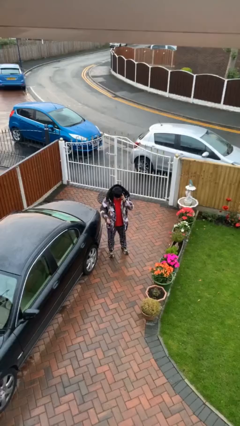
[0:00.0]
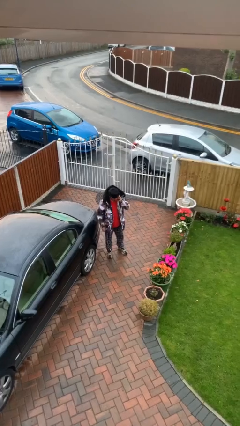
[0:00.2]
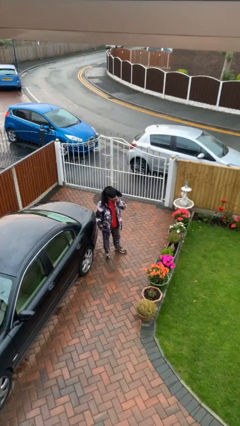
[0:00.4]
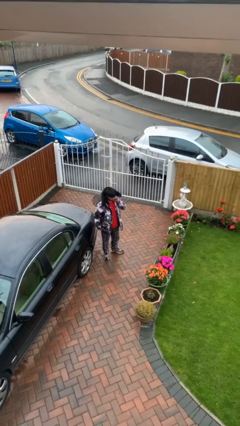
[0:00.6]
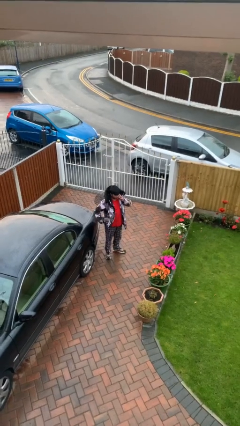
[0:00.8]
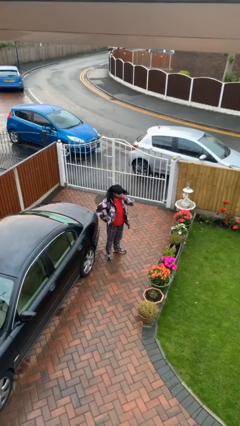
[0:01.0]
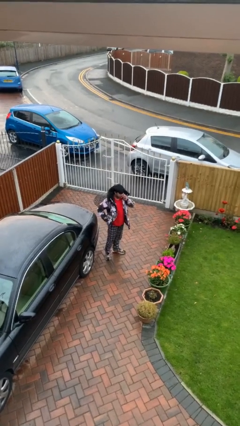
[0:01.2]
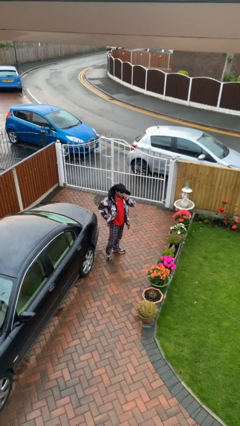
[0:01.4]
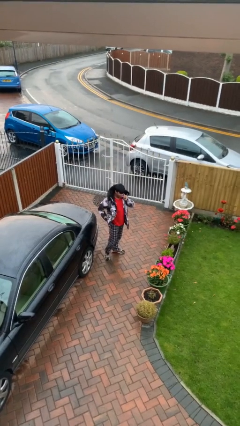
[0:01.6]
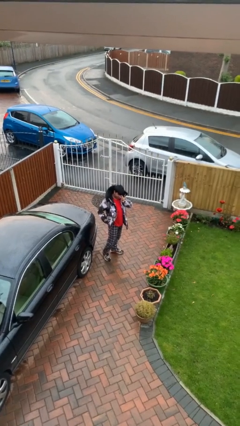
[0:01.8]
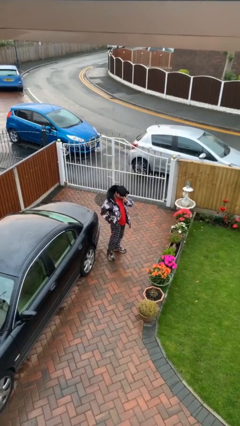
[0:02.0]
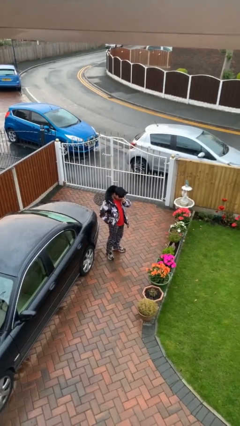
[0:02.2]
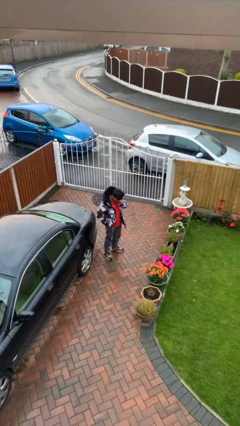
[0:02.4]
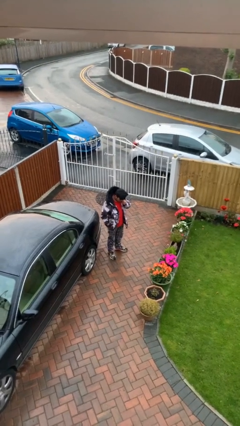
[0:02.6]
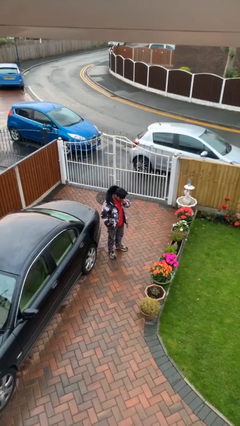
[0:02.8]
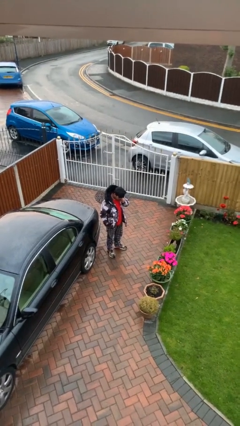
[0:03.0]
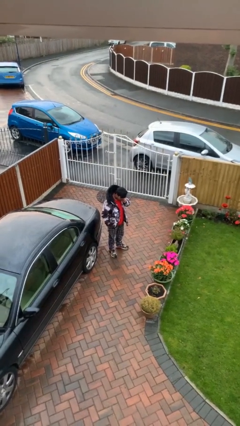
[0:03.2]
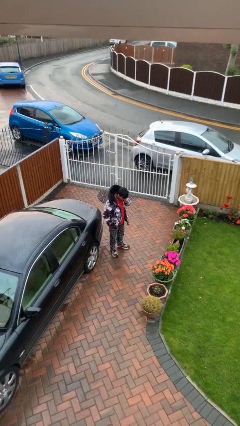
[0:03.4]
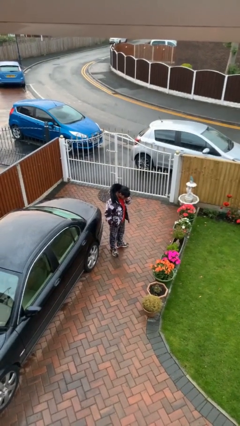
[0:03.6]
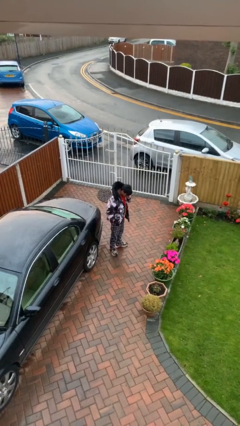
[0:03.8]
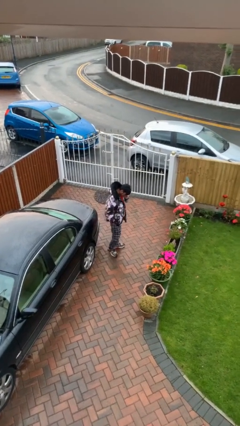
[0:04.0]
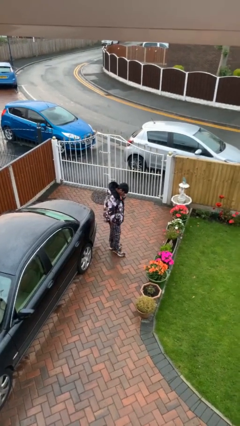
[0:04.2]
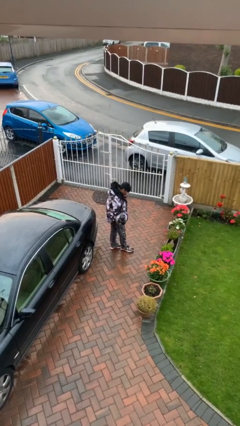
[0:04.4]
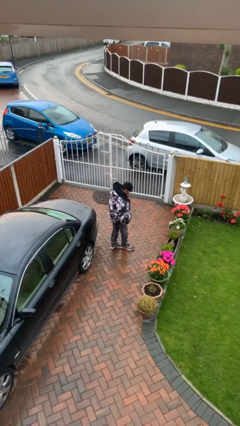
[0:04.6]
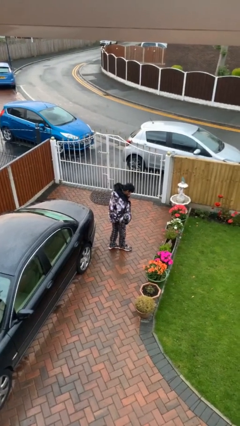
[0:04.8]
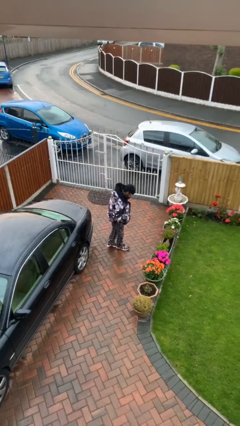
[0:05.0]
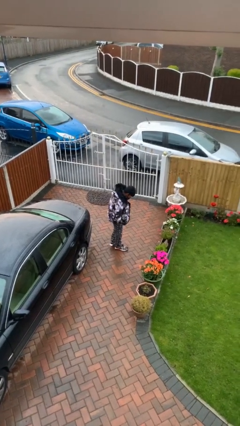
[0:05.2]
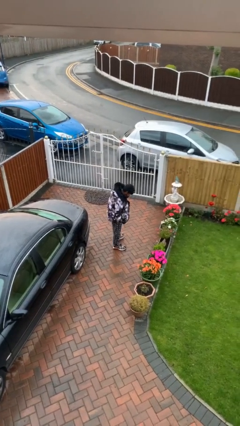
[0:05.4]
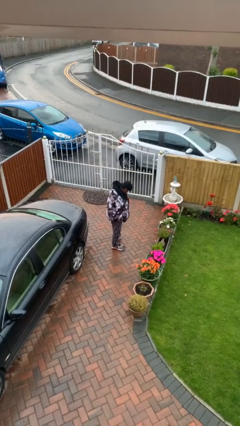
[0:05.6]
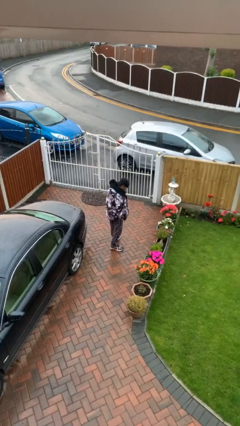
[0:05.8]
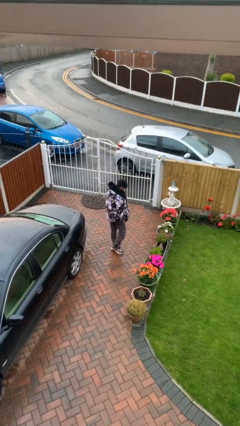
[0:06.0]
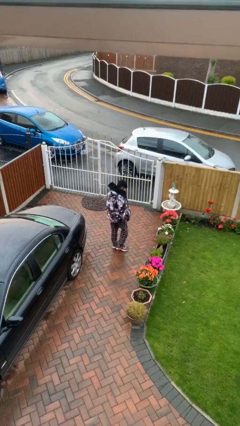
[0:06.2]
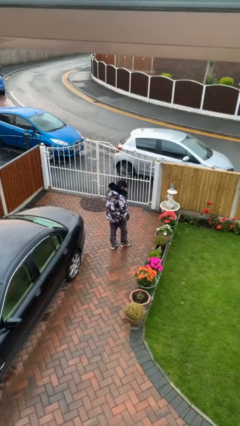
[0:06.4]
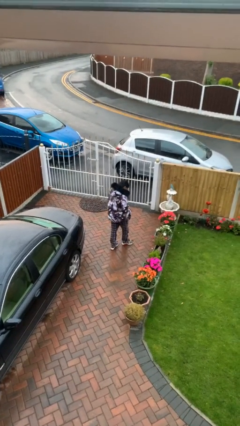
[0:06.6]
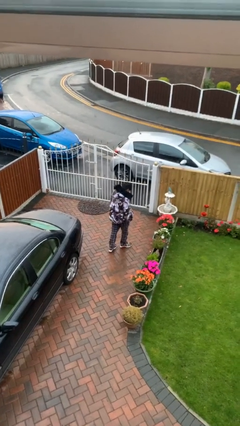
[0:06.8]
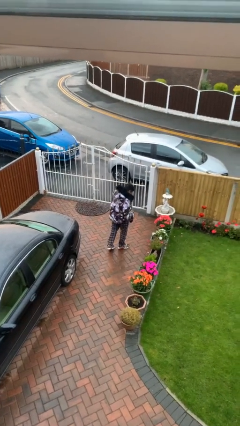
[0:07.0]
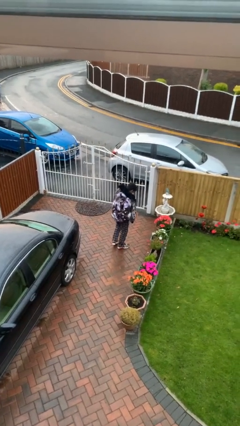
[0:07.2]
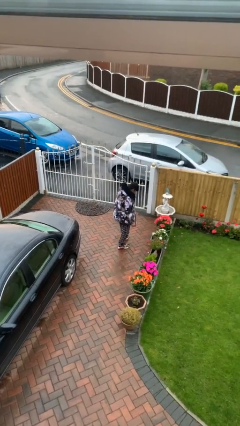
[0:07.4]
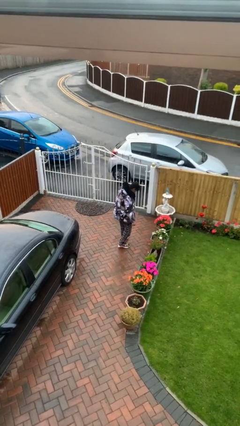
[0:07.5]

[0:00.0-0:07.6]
person talks on phone

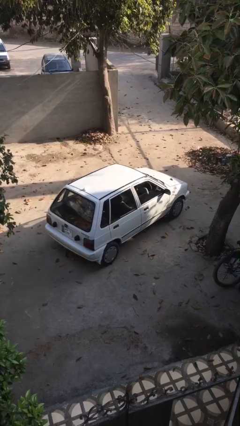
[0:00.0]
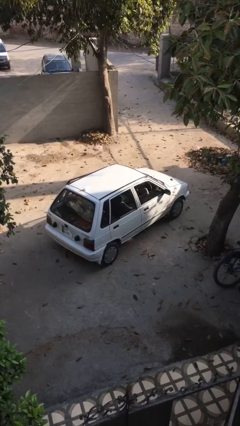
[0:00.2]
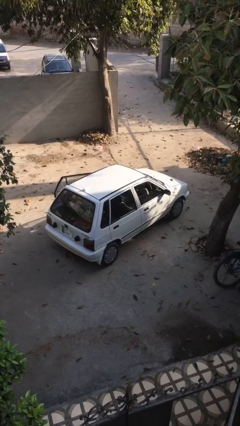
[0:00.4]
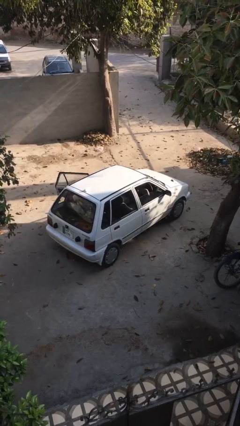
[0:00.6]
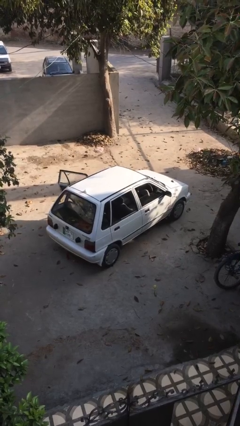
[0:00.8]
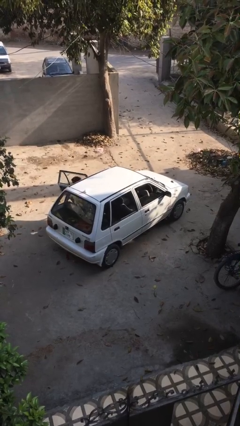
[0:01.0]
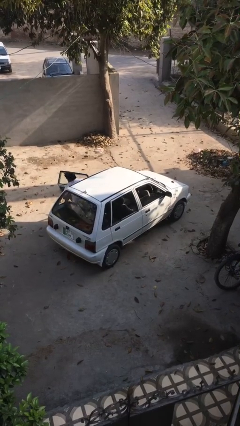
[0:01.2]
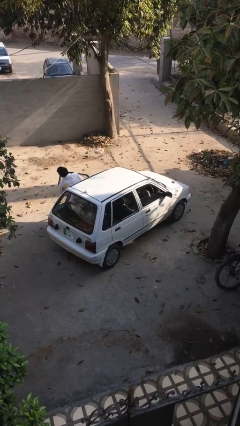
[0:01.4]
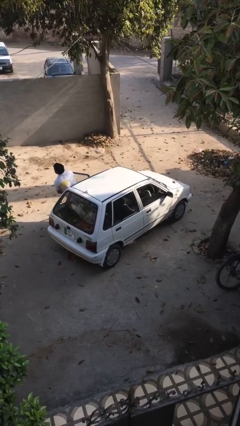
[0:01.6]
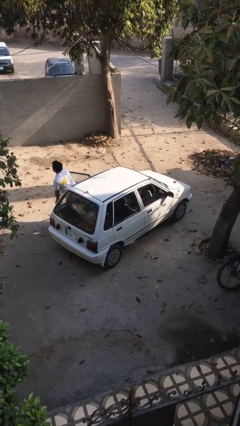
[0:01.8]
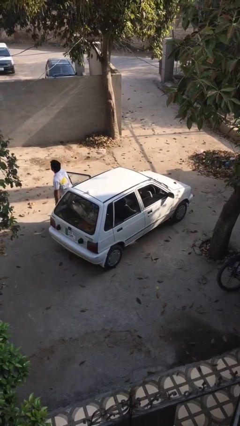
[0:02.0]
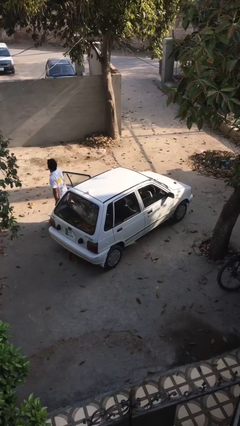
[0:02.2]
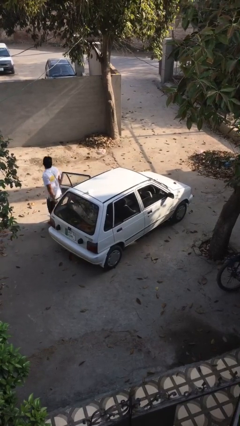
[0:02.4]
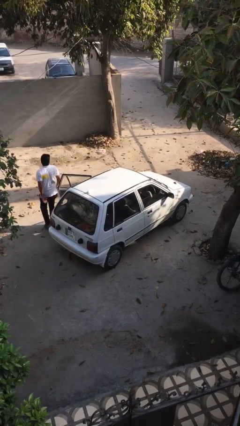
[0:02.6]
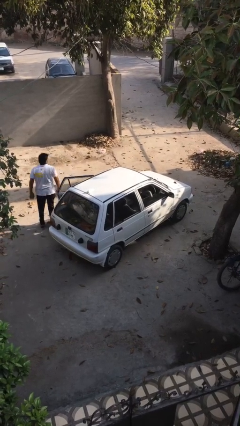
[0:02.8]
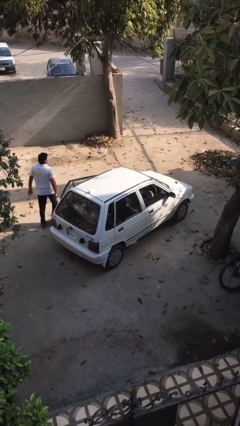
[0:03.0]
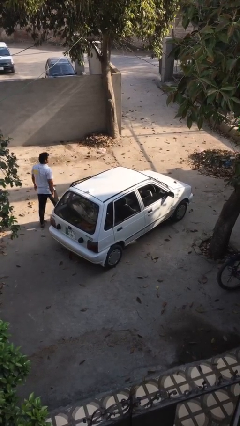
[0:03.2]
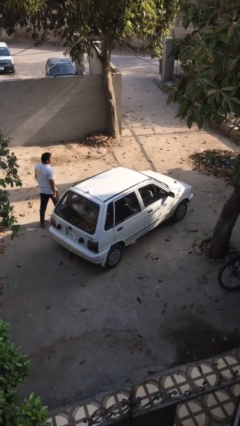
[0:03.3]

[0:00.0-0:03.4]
car drops off person

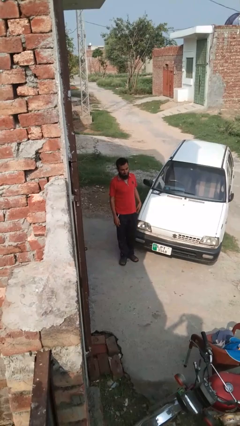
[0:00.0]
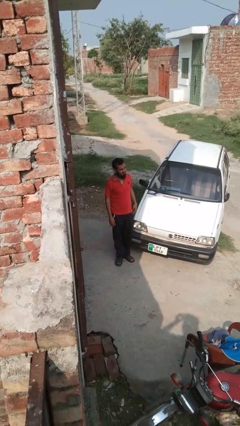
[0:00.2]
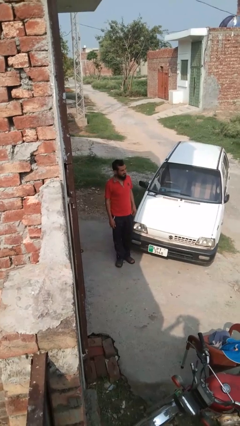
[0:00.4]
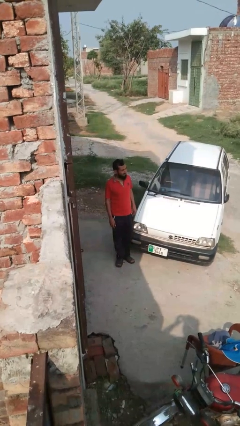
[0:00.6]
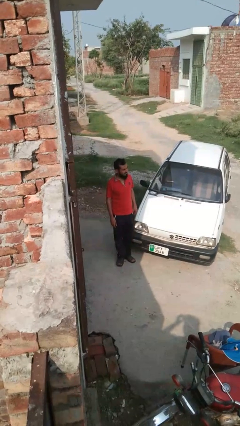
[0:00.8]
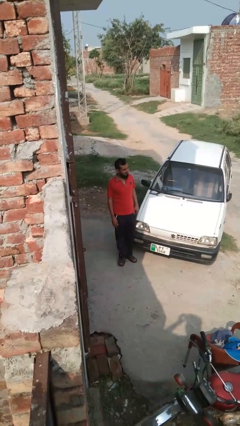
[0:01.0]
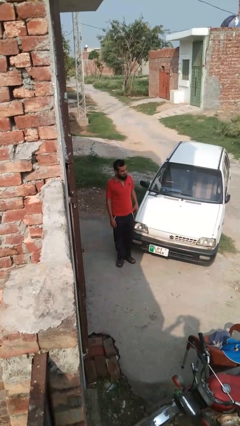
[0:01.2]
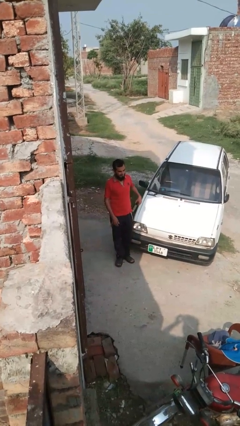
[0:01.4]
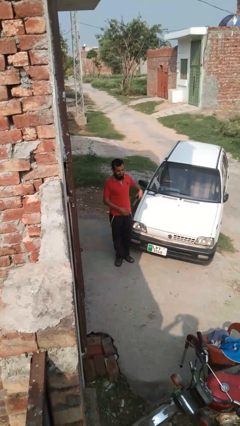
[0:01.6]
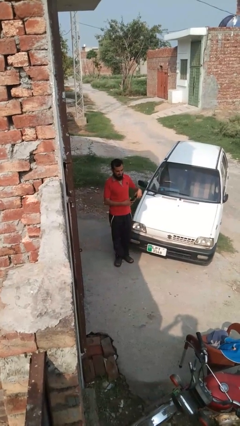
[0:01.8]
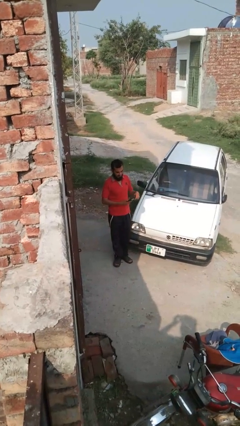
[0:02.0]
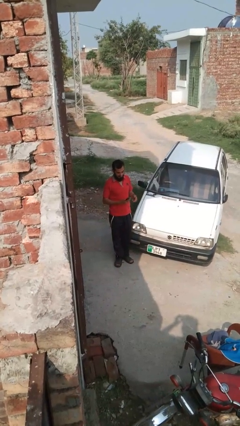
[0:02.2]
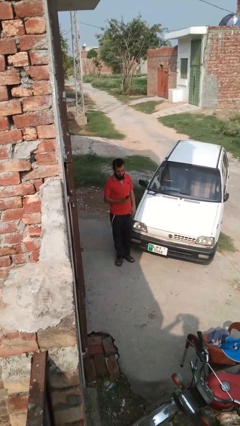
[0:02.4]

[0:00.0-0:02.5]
person takes phone from pocket

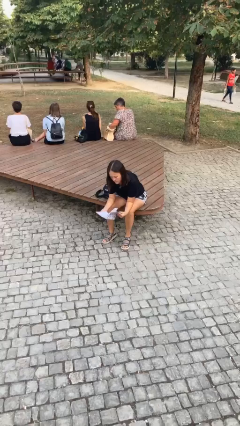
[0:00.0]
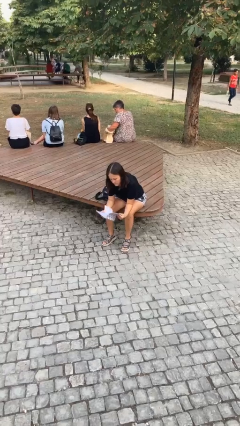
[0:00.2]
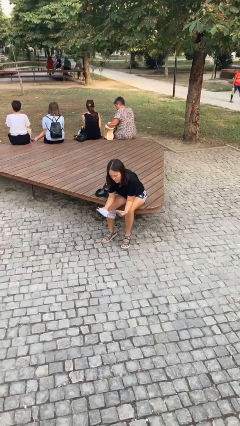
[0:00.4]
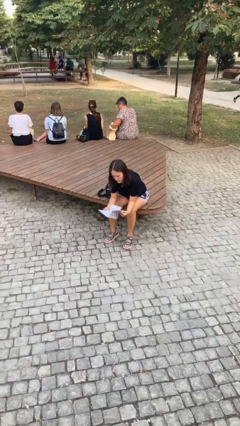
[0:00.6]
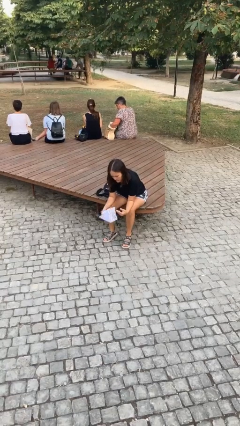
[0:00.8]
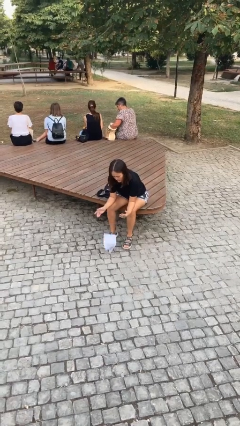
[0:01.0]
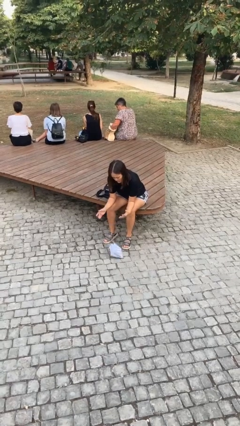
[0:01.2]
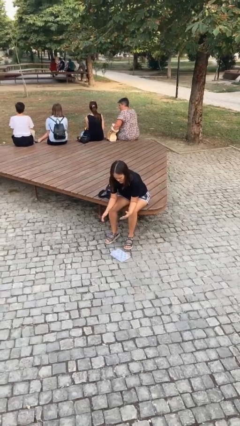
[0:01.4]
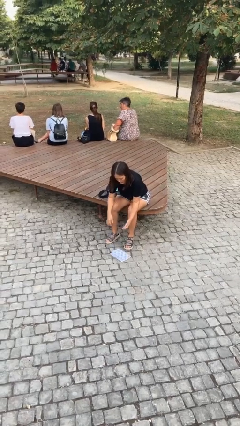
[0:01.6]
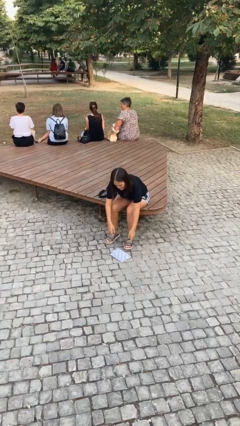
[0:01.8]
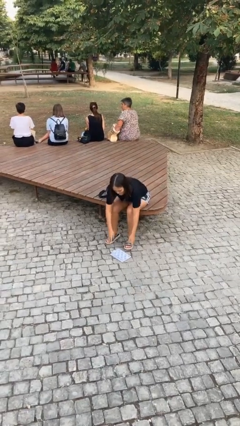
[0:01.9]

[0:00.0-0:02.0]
person drops object

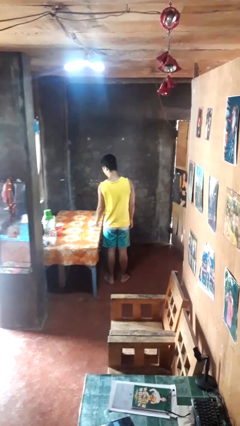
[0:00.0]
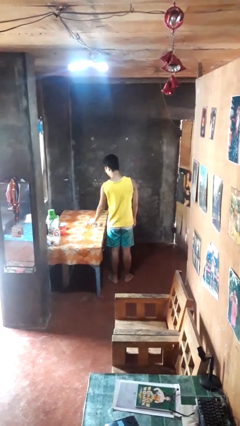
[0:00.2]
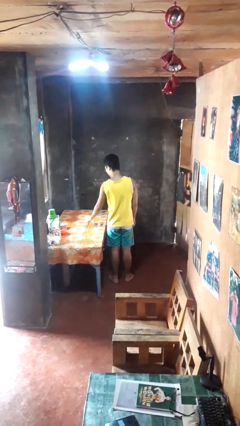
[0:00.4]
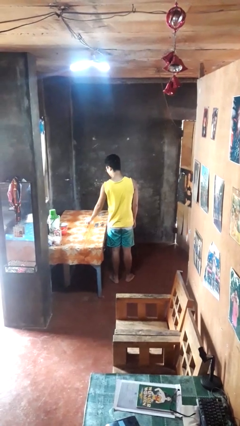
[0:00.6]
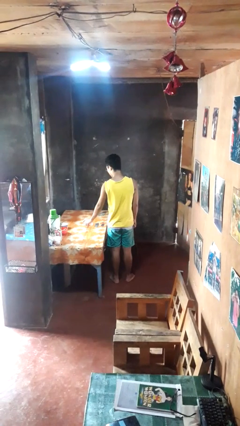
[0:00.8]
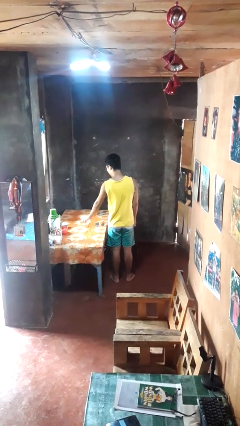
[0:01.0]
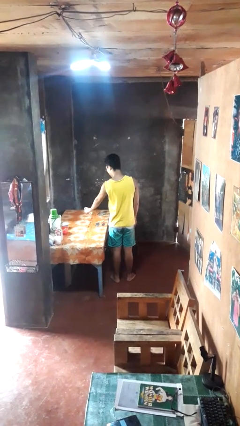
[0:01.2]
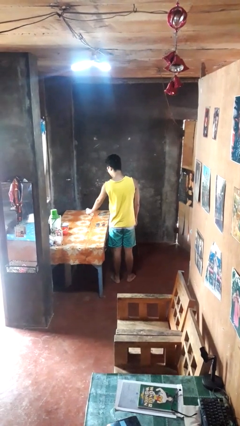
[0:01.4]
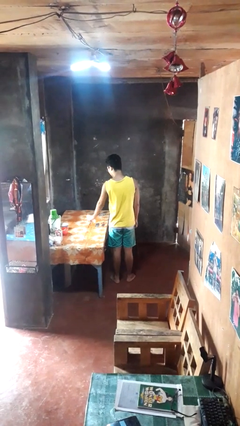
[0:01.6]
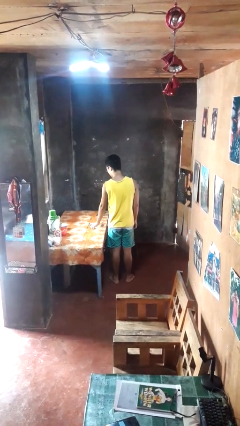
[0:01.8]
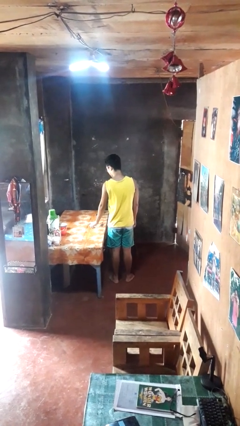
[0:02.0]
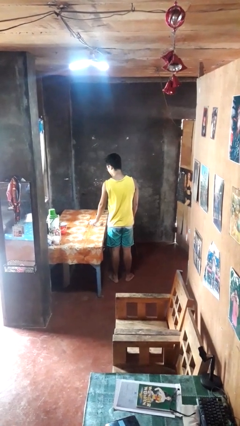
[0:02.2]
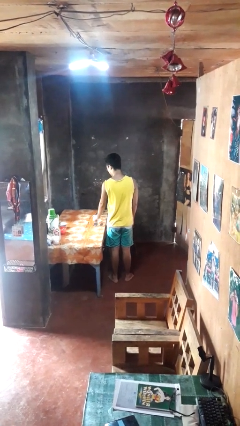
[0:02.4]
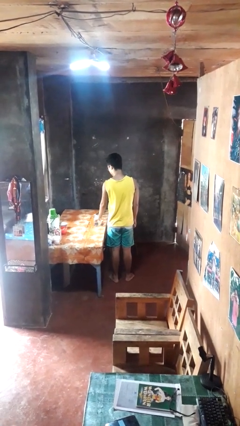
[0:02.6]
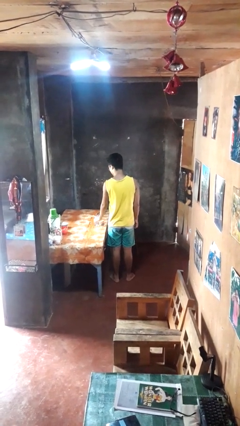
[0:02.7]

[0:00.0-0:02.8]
person sprays from bottle
